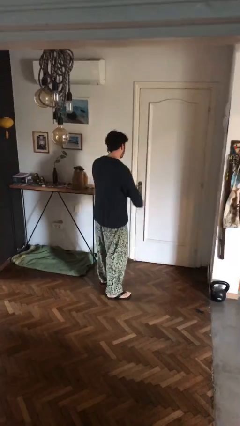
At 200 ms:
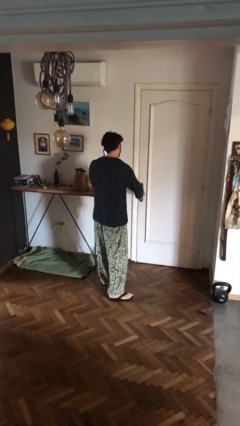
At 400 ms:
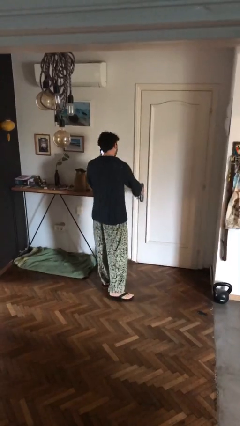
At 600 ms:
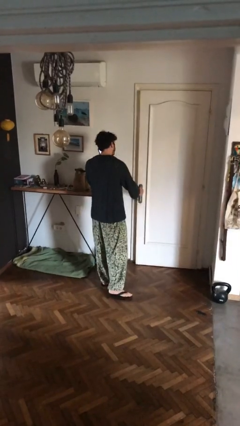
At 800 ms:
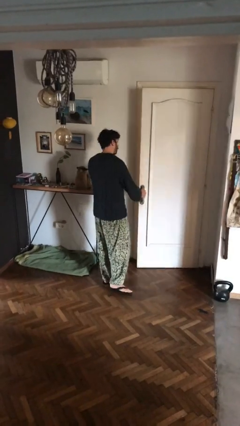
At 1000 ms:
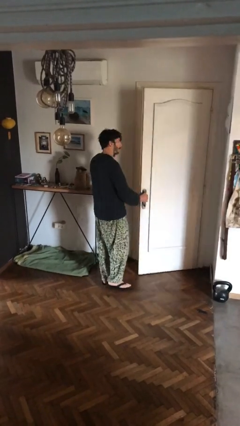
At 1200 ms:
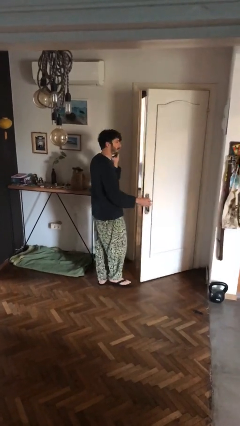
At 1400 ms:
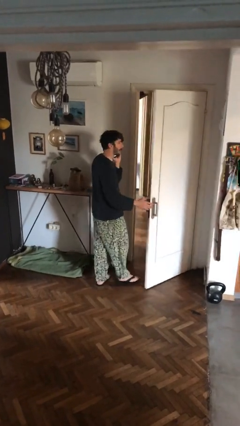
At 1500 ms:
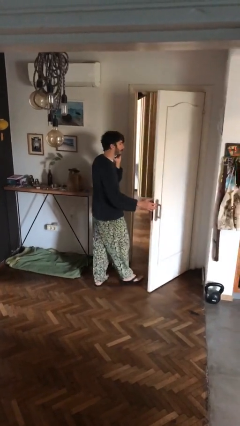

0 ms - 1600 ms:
person opens facility door

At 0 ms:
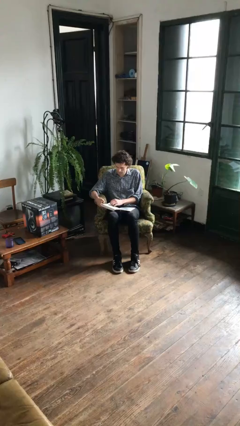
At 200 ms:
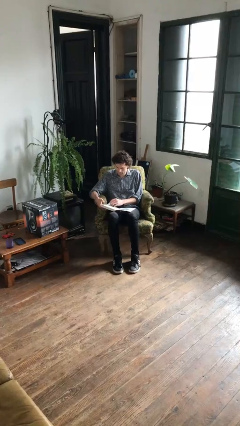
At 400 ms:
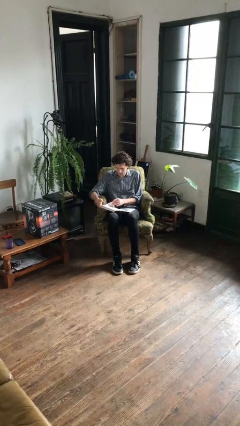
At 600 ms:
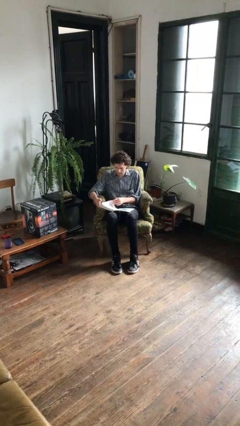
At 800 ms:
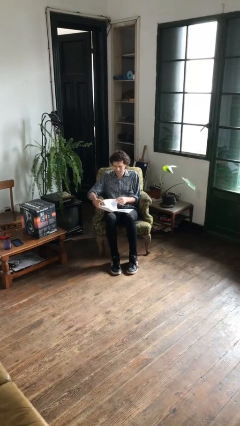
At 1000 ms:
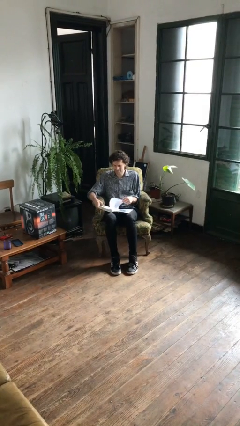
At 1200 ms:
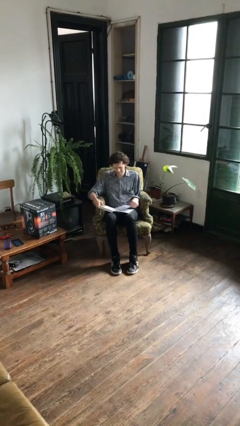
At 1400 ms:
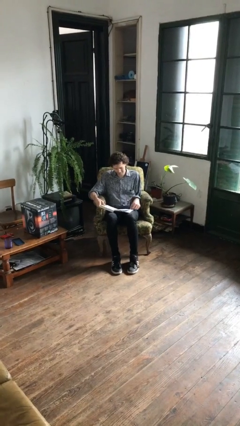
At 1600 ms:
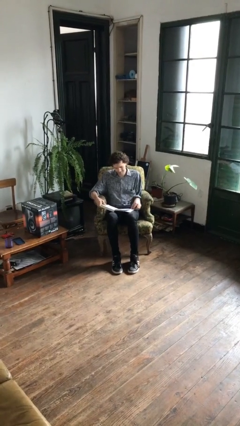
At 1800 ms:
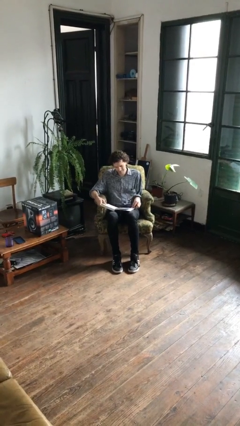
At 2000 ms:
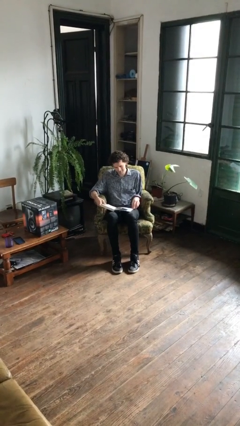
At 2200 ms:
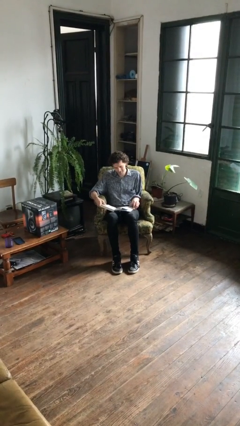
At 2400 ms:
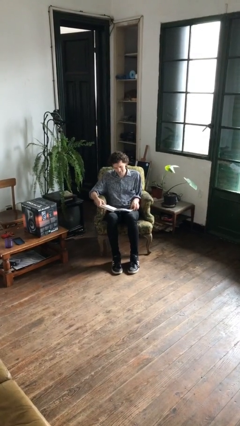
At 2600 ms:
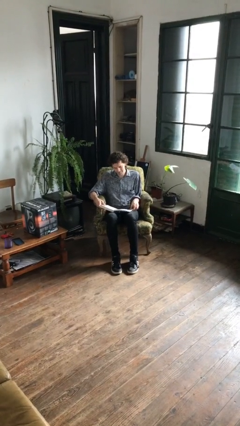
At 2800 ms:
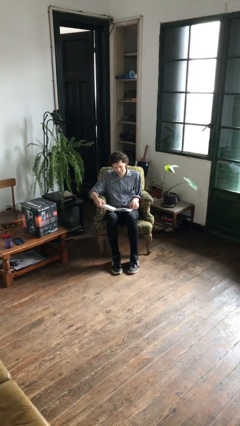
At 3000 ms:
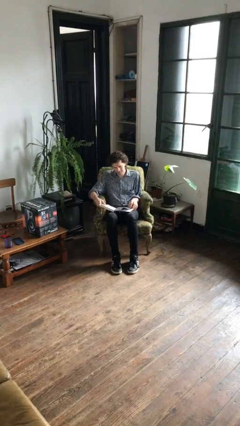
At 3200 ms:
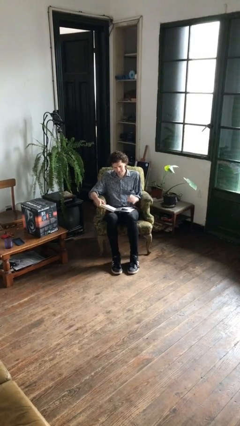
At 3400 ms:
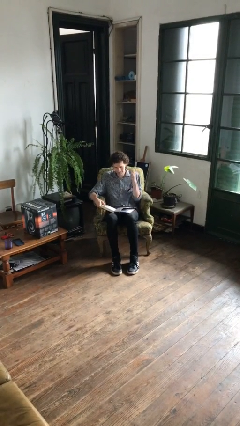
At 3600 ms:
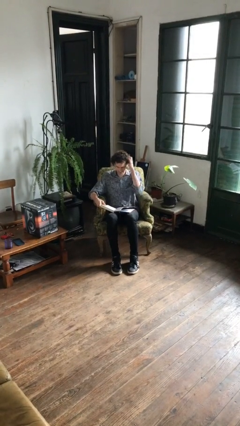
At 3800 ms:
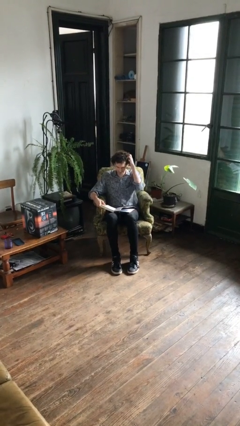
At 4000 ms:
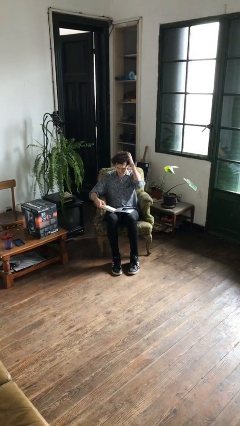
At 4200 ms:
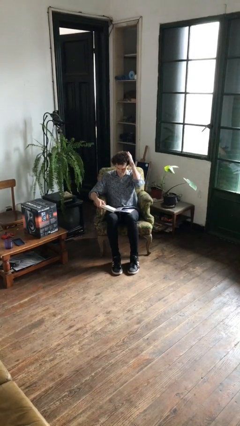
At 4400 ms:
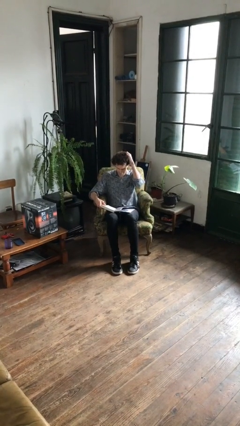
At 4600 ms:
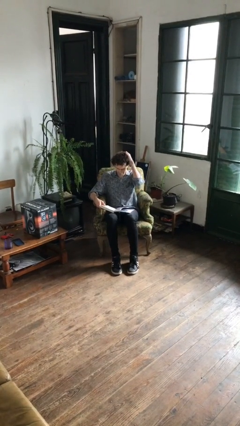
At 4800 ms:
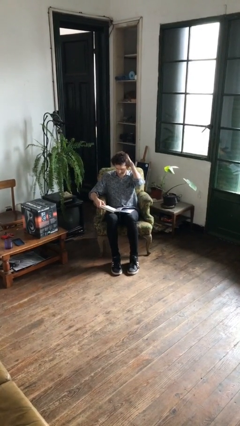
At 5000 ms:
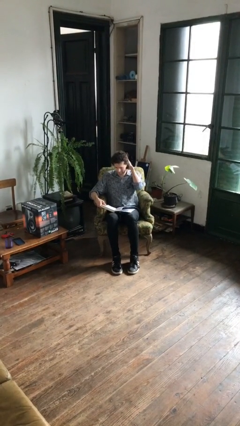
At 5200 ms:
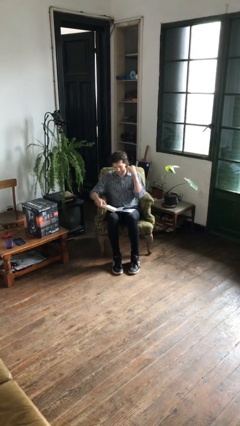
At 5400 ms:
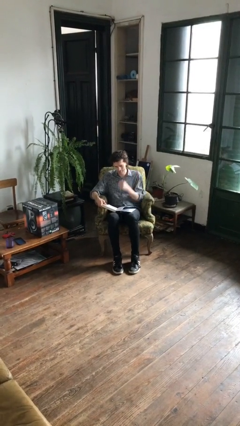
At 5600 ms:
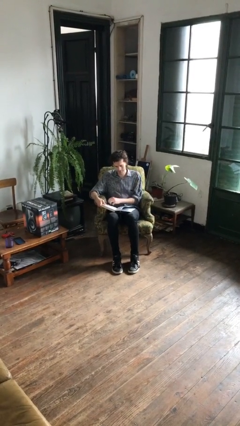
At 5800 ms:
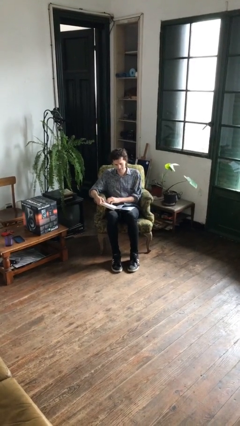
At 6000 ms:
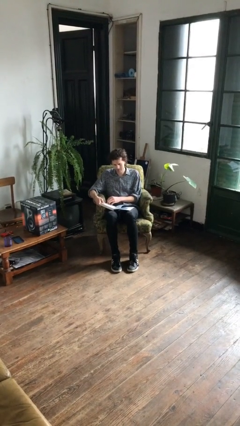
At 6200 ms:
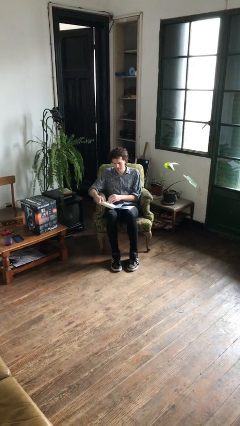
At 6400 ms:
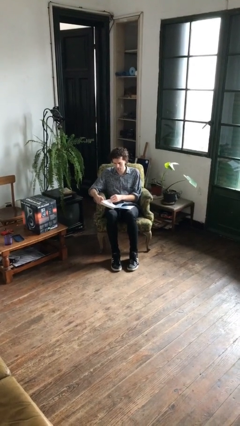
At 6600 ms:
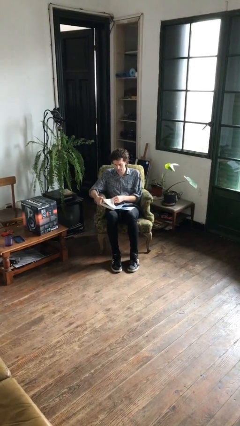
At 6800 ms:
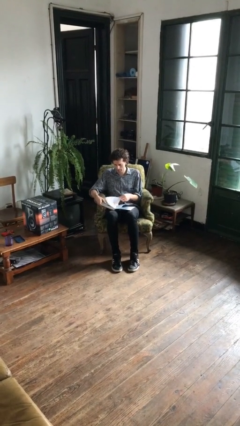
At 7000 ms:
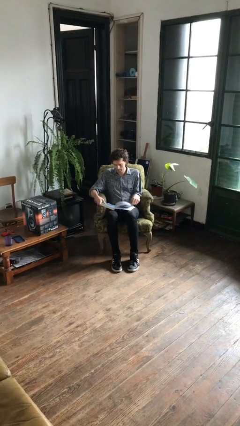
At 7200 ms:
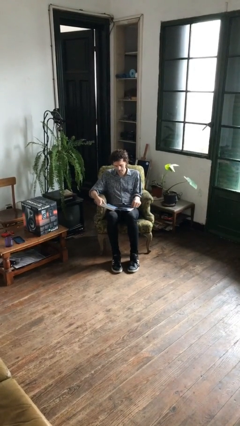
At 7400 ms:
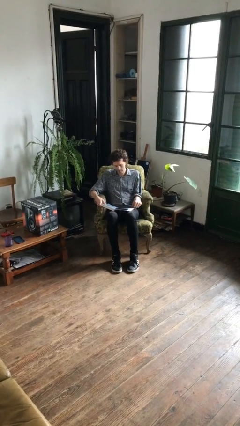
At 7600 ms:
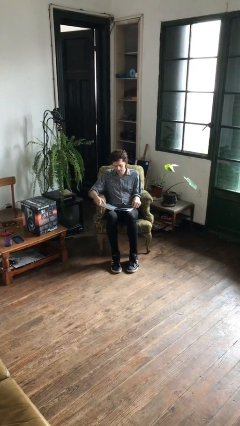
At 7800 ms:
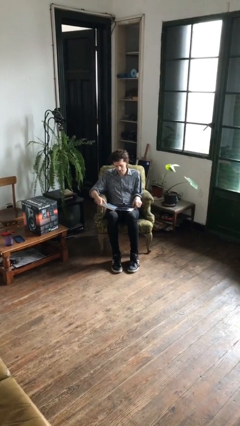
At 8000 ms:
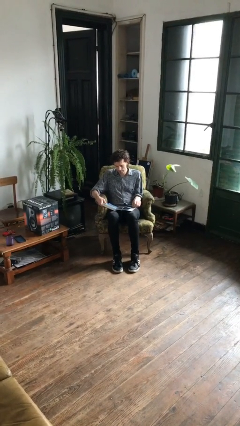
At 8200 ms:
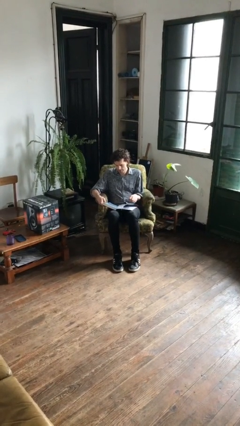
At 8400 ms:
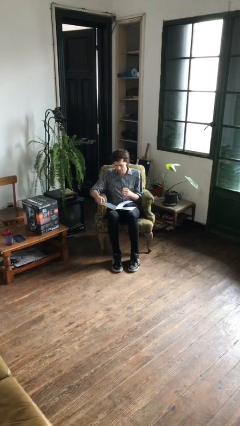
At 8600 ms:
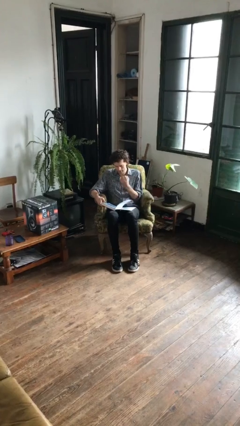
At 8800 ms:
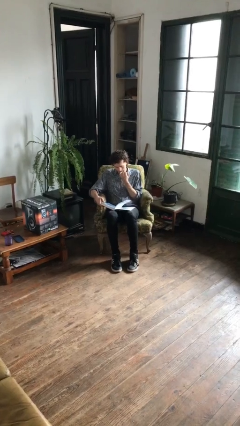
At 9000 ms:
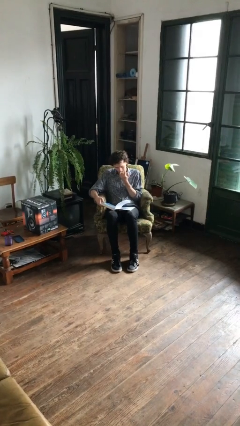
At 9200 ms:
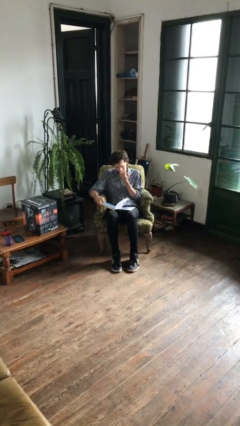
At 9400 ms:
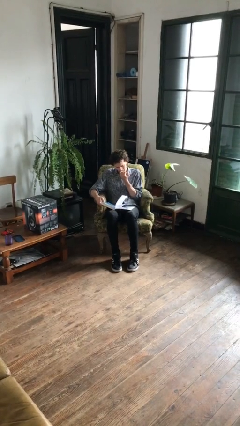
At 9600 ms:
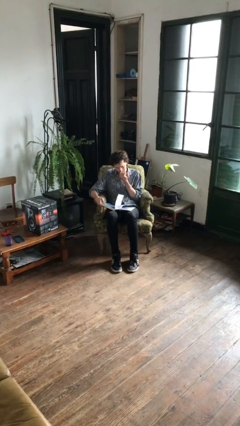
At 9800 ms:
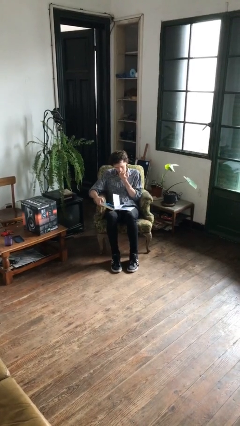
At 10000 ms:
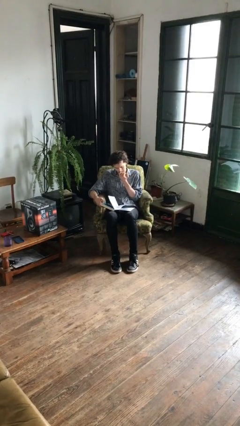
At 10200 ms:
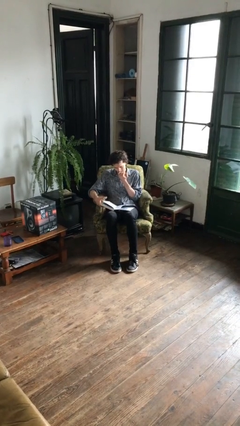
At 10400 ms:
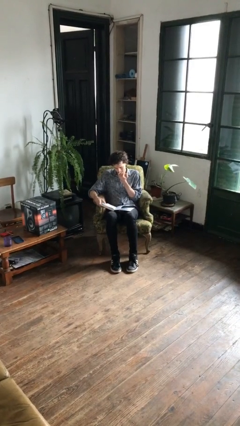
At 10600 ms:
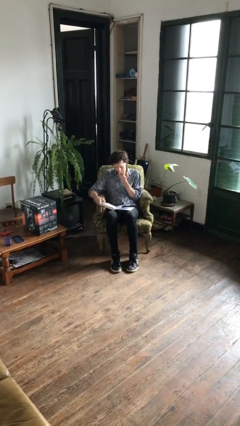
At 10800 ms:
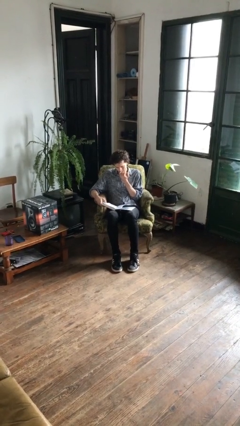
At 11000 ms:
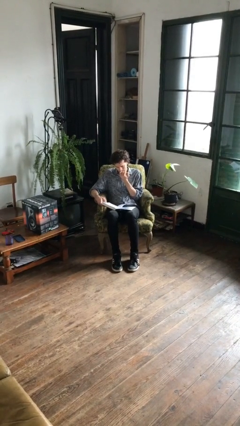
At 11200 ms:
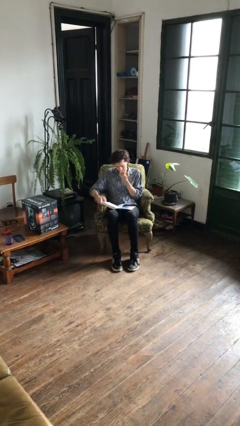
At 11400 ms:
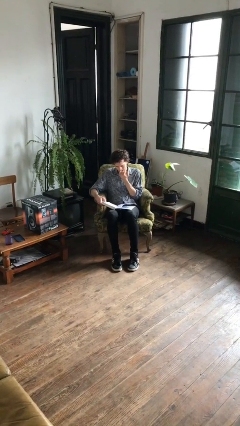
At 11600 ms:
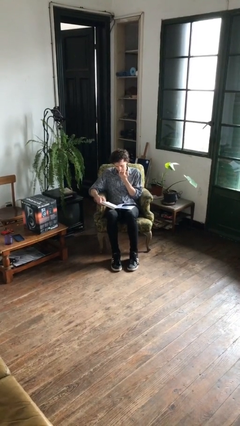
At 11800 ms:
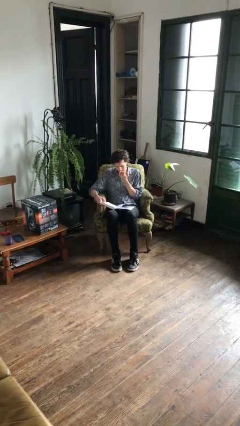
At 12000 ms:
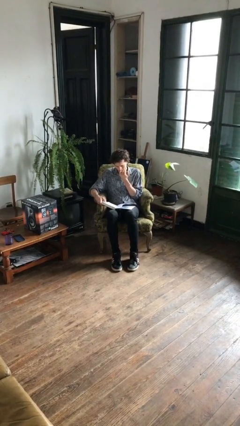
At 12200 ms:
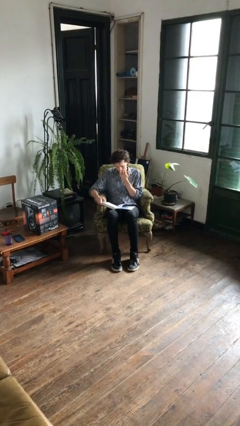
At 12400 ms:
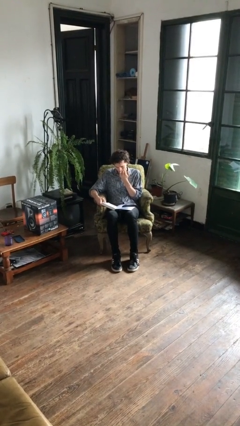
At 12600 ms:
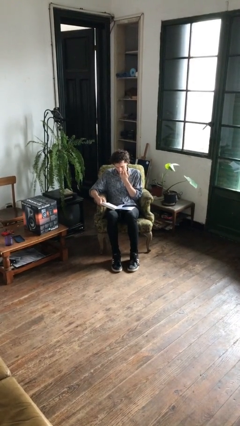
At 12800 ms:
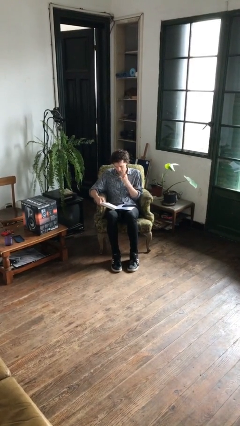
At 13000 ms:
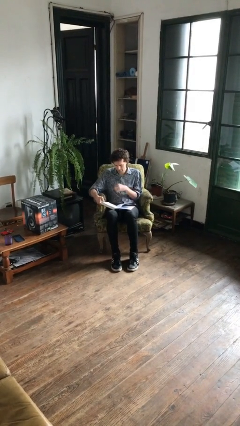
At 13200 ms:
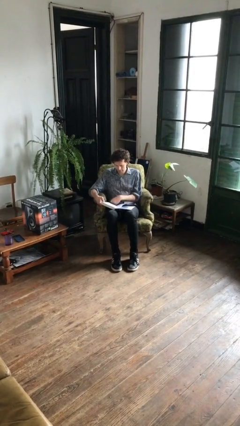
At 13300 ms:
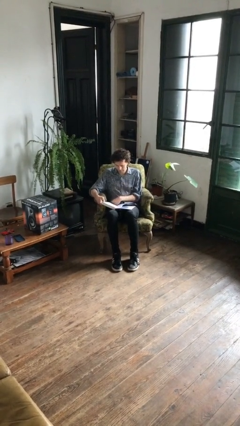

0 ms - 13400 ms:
person reads document

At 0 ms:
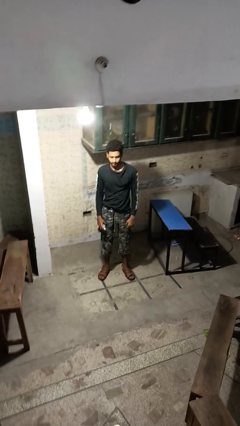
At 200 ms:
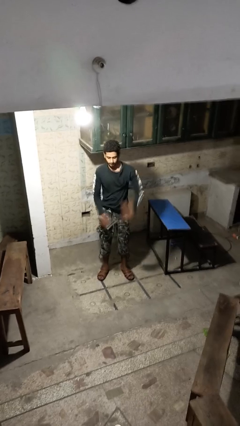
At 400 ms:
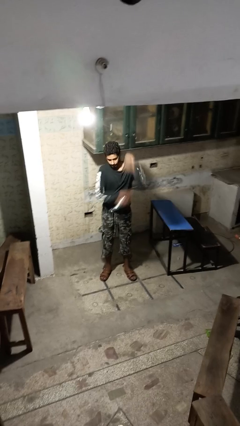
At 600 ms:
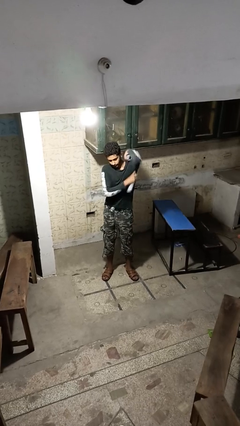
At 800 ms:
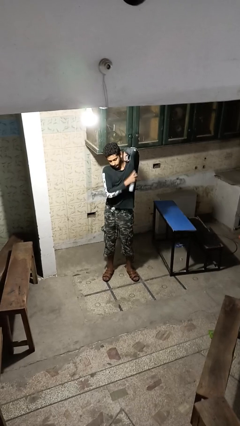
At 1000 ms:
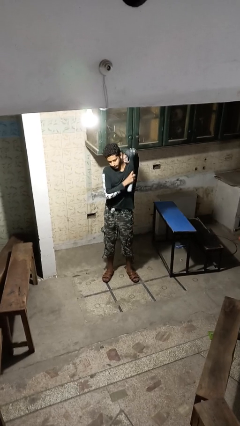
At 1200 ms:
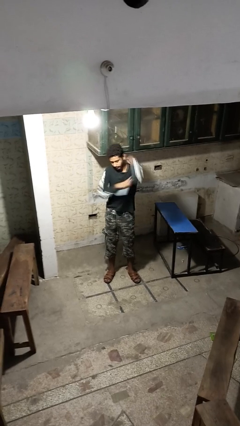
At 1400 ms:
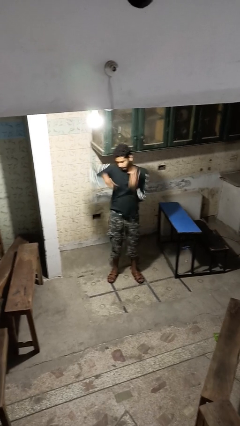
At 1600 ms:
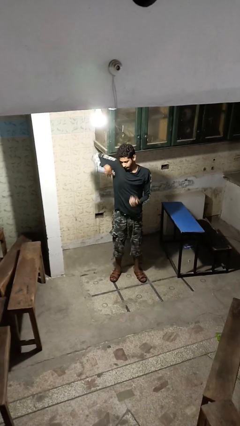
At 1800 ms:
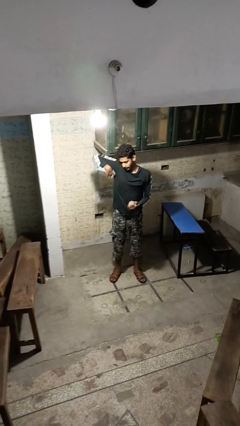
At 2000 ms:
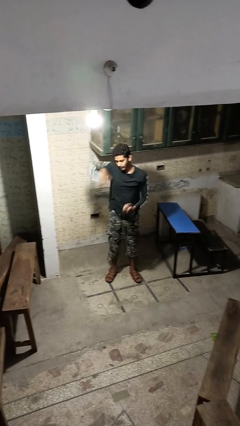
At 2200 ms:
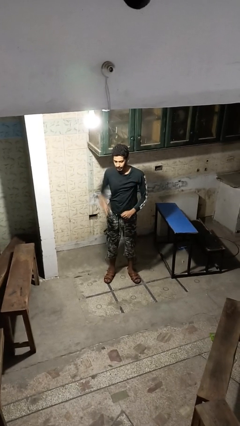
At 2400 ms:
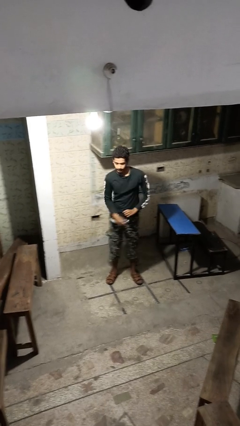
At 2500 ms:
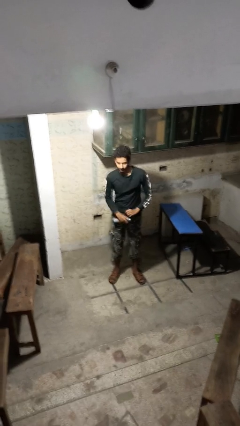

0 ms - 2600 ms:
person applies deodorant

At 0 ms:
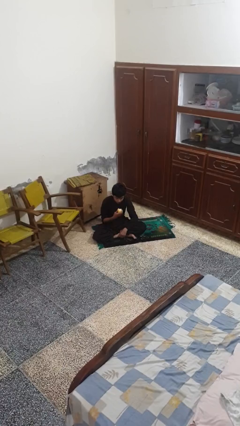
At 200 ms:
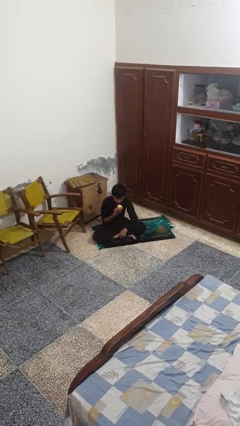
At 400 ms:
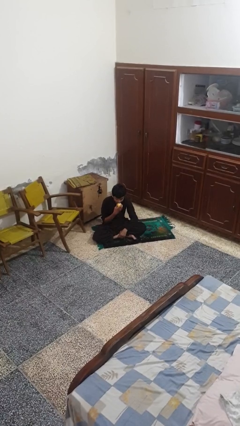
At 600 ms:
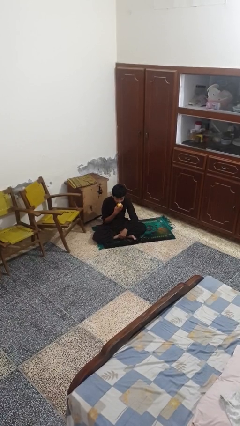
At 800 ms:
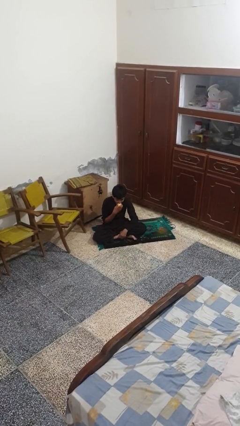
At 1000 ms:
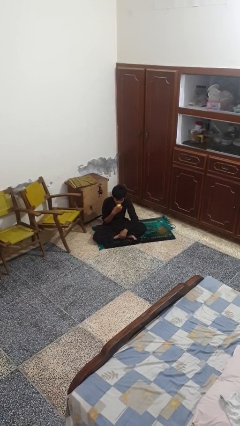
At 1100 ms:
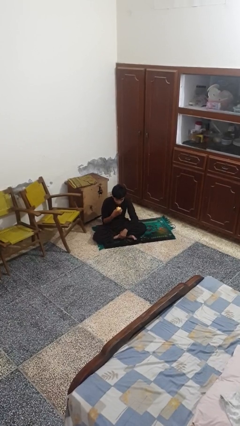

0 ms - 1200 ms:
person eats apple
